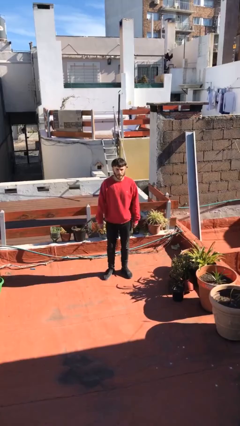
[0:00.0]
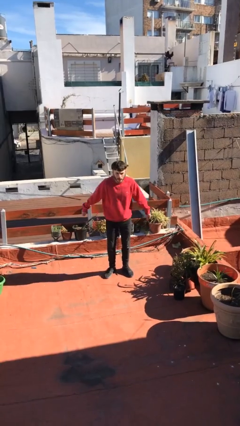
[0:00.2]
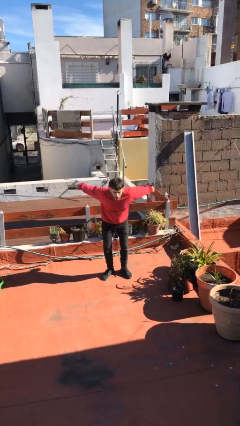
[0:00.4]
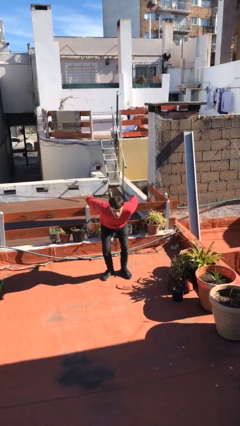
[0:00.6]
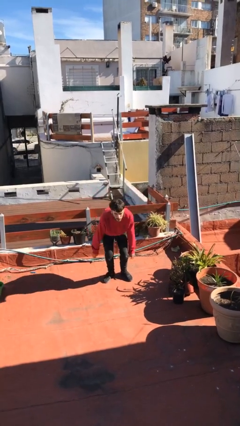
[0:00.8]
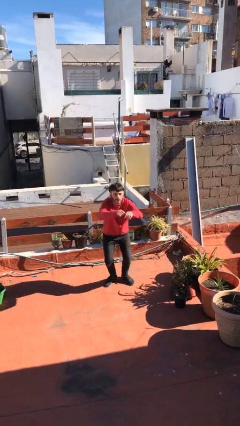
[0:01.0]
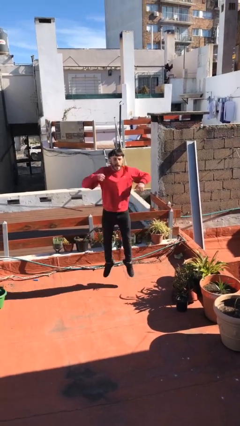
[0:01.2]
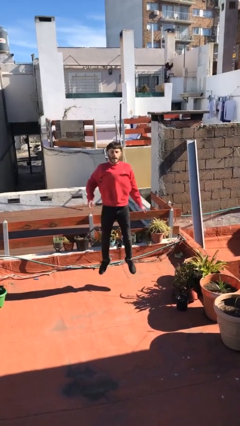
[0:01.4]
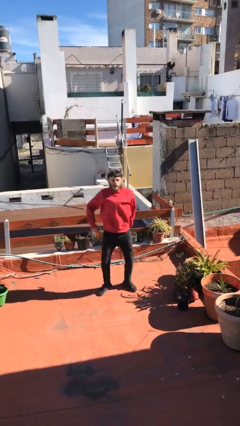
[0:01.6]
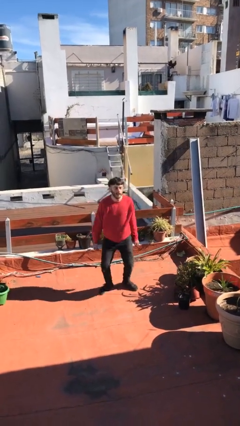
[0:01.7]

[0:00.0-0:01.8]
person jumps

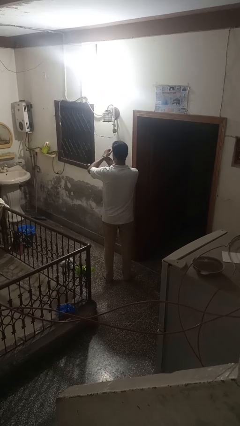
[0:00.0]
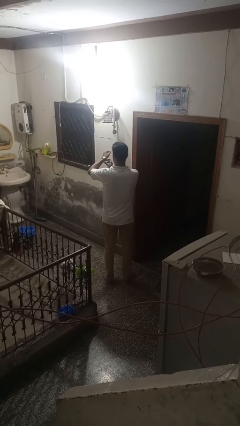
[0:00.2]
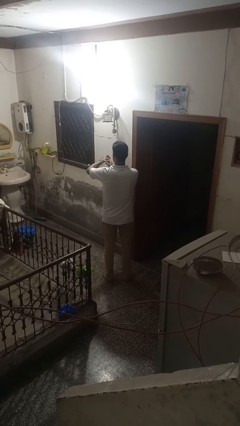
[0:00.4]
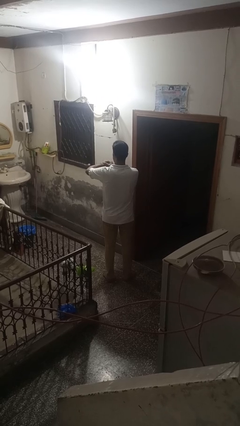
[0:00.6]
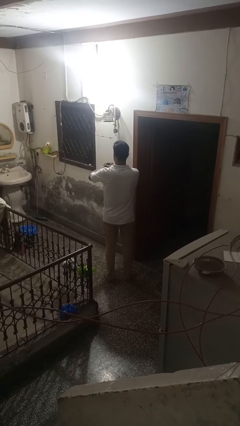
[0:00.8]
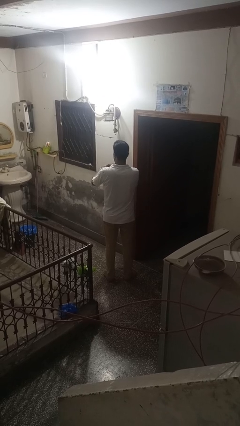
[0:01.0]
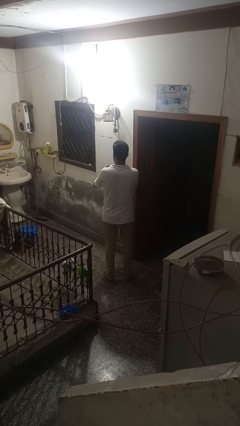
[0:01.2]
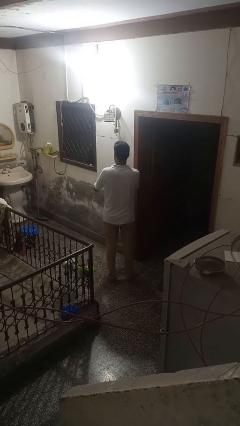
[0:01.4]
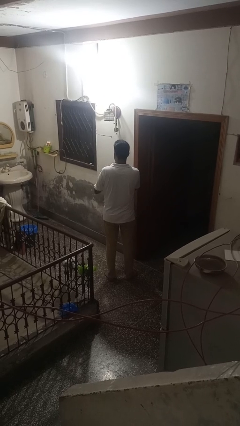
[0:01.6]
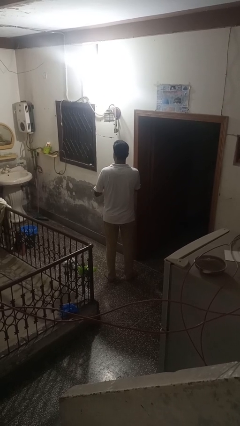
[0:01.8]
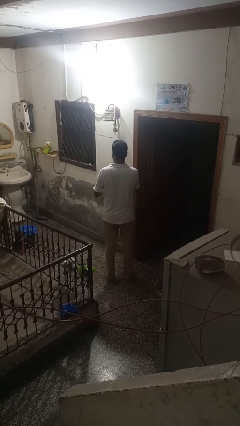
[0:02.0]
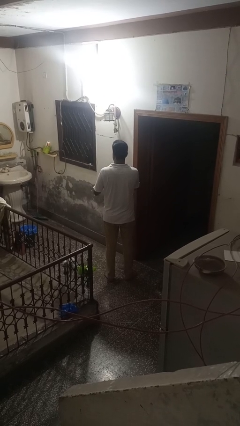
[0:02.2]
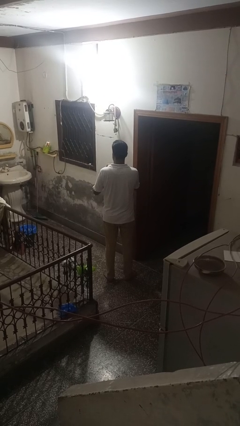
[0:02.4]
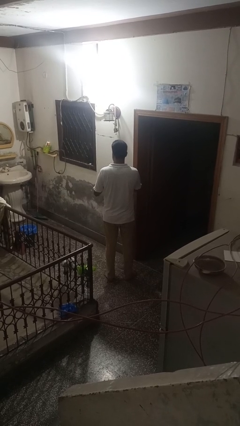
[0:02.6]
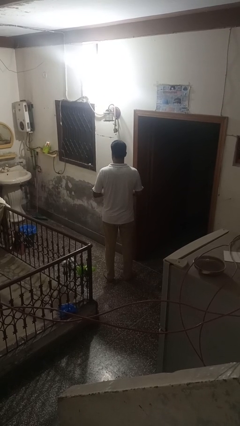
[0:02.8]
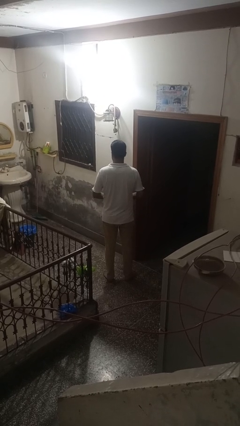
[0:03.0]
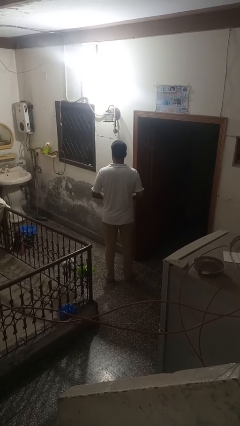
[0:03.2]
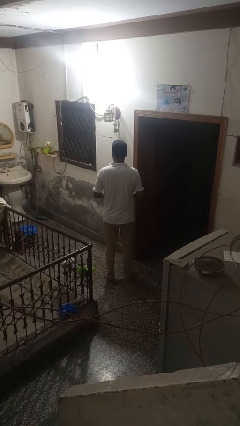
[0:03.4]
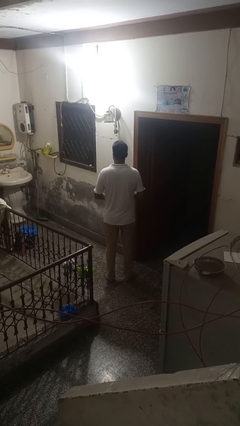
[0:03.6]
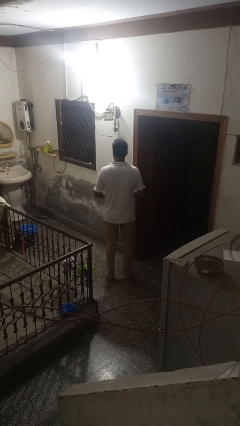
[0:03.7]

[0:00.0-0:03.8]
person takes off wristwatch

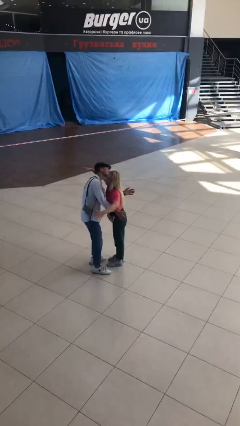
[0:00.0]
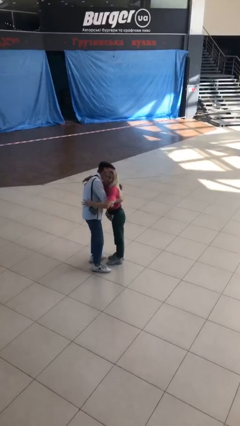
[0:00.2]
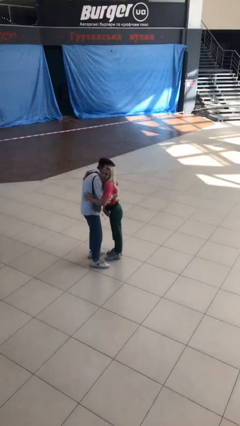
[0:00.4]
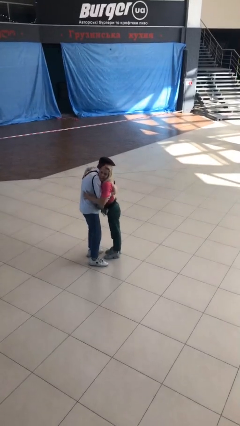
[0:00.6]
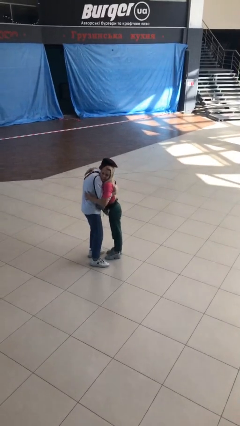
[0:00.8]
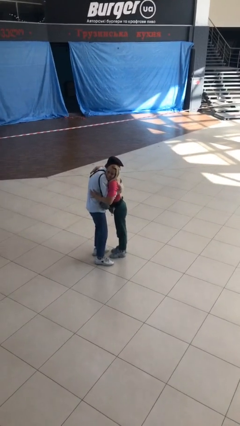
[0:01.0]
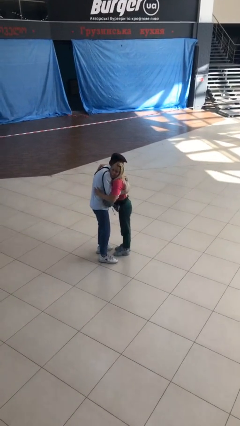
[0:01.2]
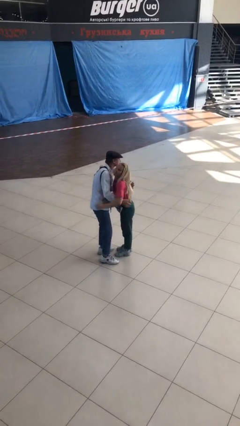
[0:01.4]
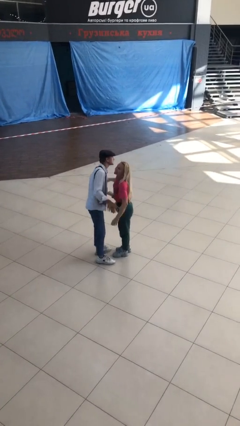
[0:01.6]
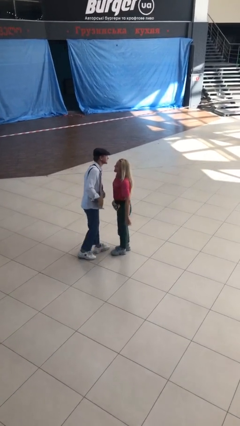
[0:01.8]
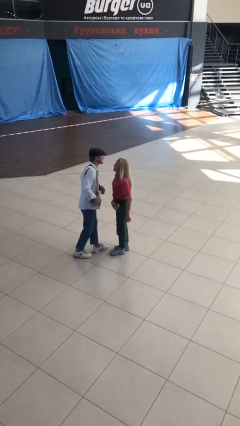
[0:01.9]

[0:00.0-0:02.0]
person embraces person

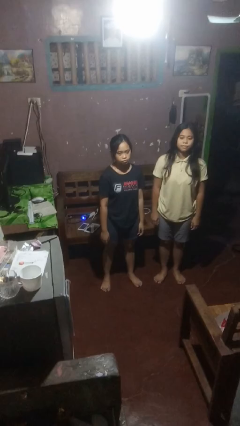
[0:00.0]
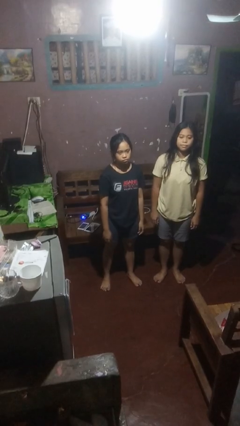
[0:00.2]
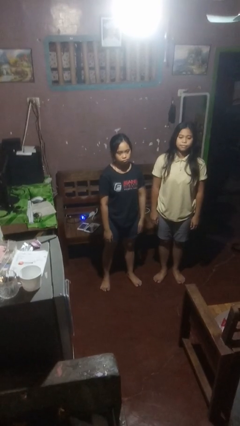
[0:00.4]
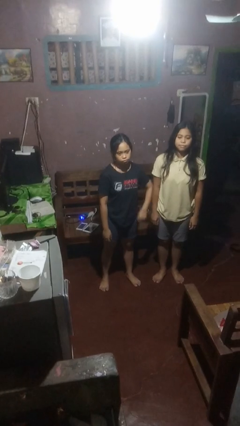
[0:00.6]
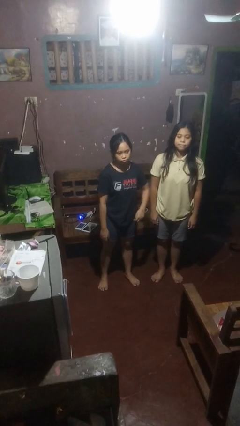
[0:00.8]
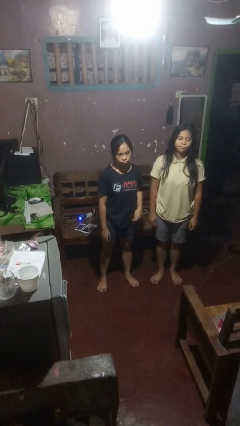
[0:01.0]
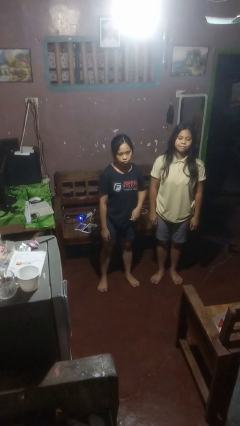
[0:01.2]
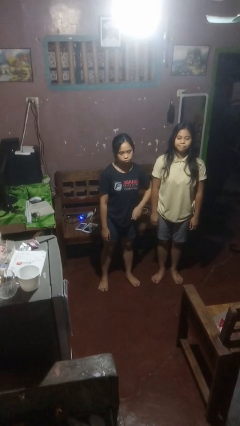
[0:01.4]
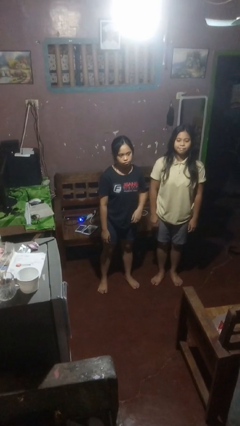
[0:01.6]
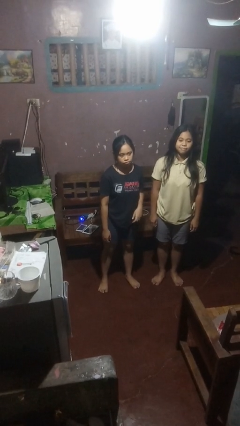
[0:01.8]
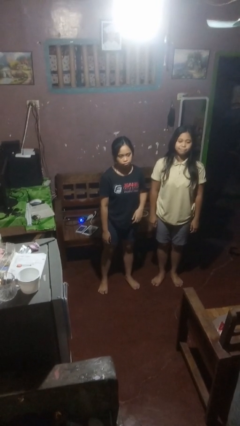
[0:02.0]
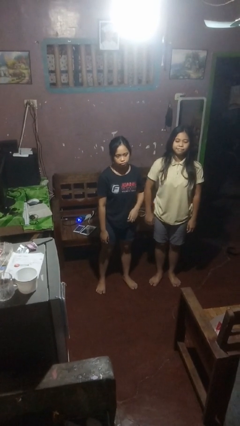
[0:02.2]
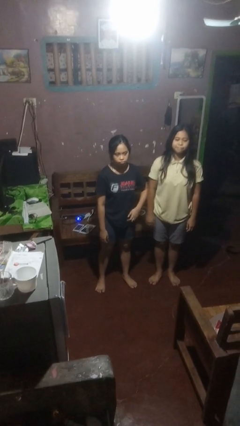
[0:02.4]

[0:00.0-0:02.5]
person nudges person with elbow

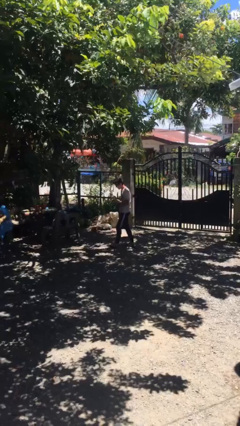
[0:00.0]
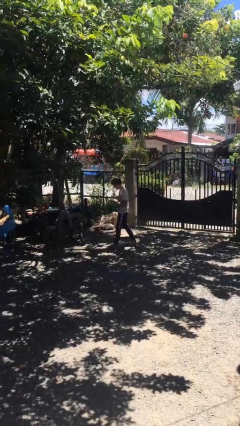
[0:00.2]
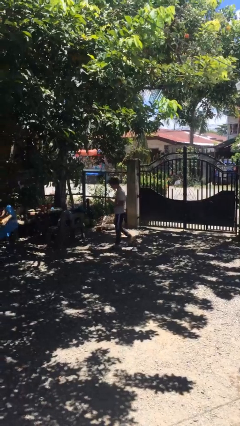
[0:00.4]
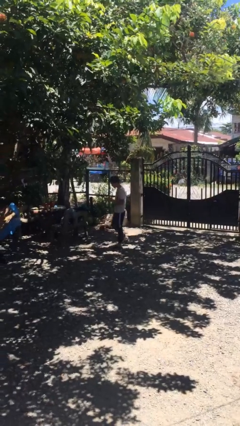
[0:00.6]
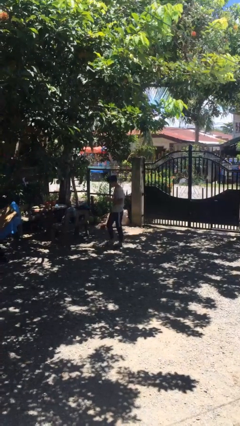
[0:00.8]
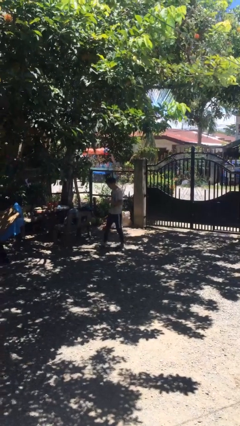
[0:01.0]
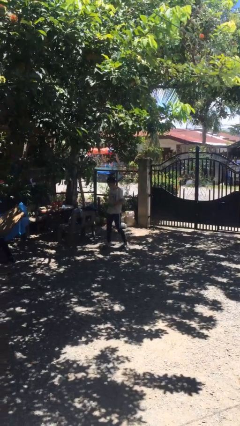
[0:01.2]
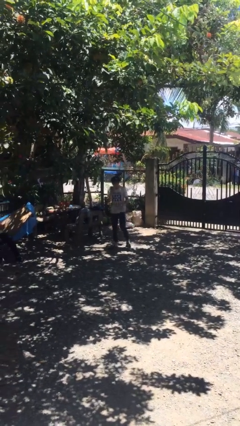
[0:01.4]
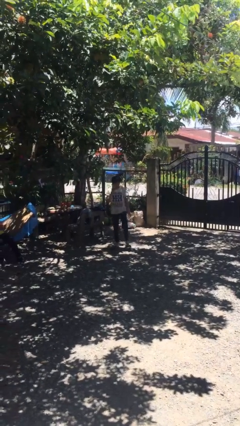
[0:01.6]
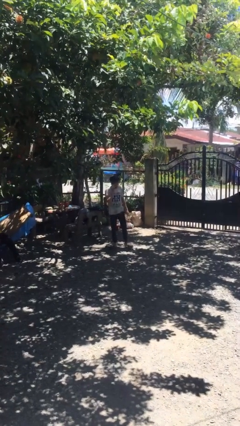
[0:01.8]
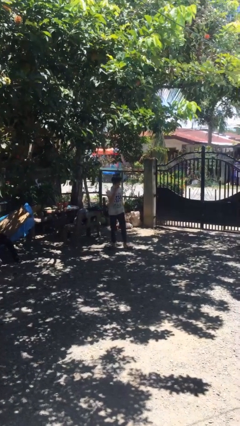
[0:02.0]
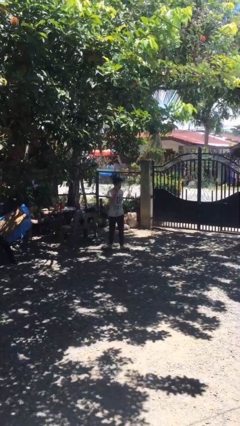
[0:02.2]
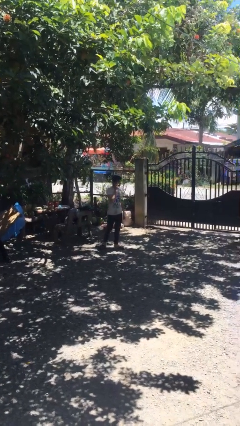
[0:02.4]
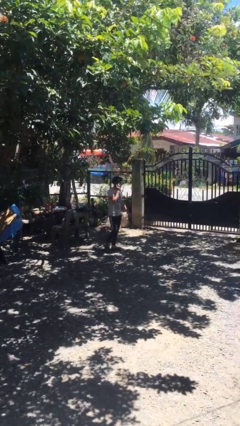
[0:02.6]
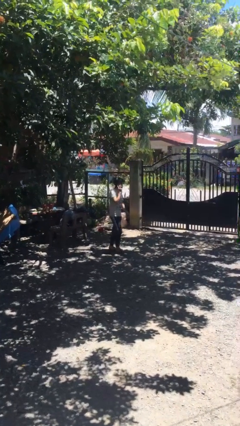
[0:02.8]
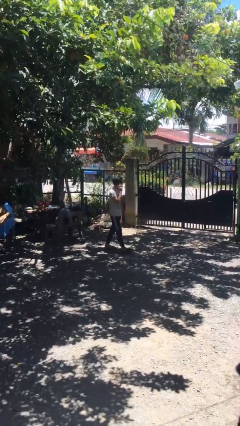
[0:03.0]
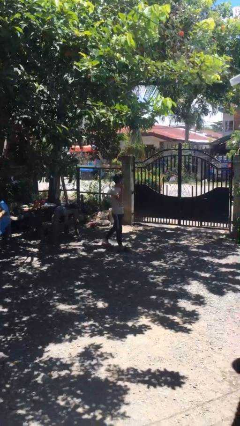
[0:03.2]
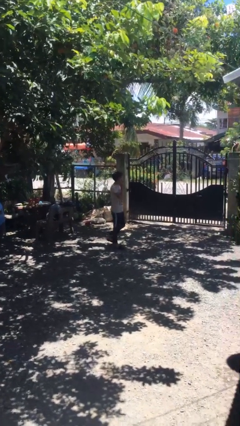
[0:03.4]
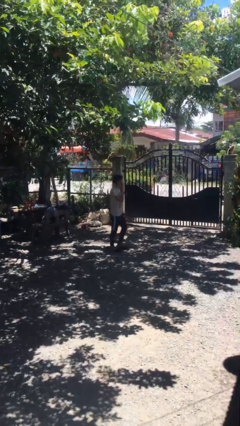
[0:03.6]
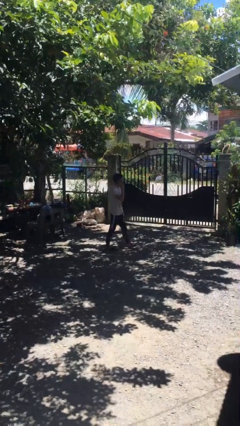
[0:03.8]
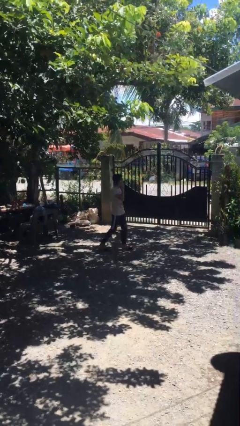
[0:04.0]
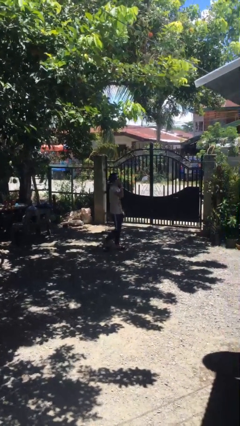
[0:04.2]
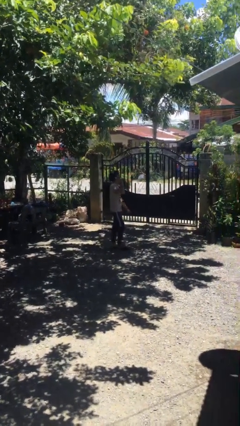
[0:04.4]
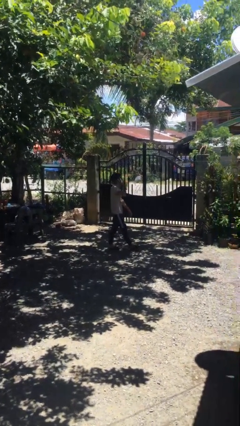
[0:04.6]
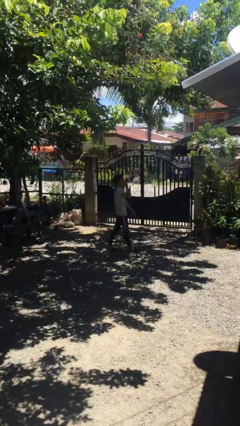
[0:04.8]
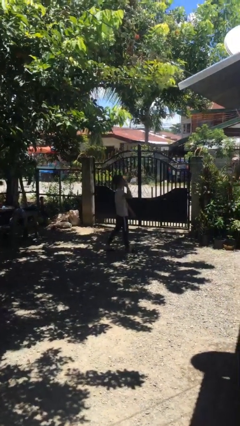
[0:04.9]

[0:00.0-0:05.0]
person talks on phone

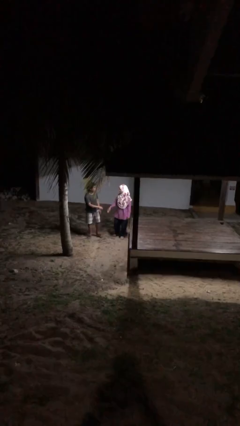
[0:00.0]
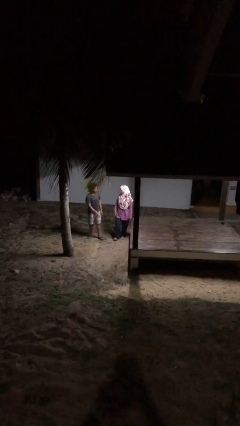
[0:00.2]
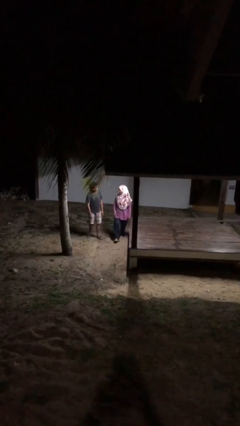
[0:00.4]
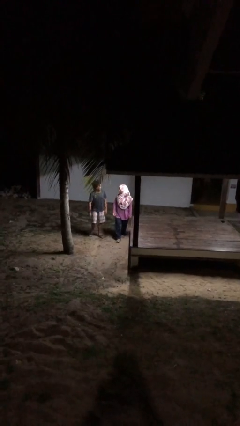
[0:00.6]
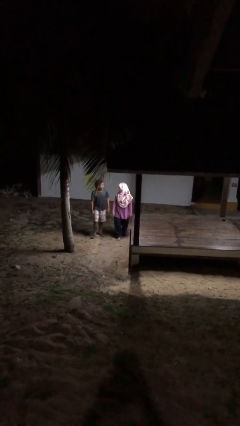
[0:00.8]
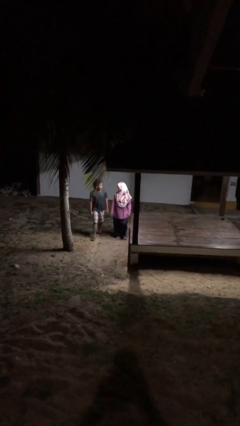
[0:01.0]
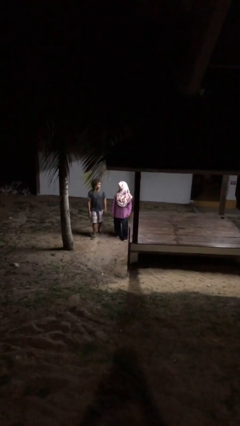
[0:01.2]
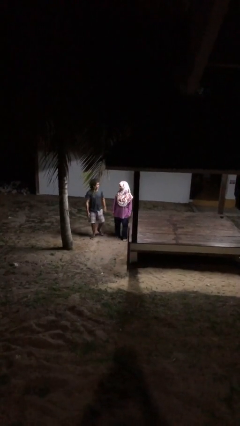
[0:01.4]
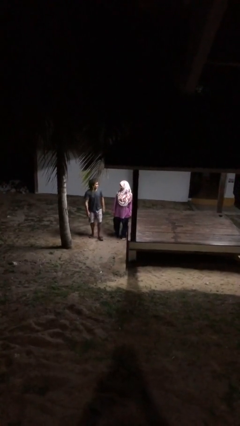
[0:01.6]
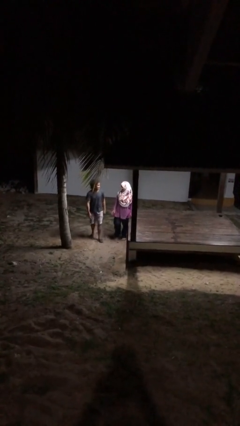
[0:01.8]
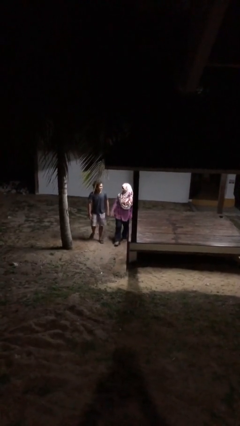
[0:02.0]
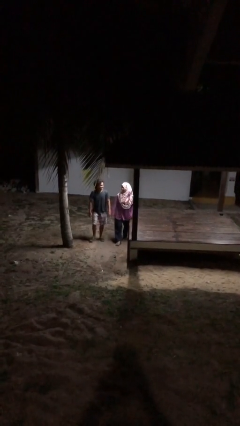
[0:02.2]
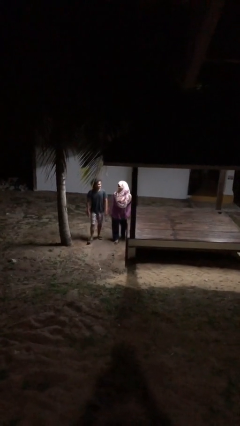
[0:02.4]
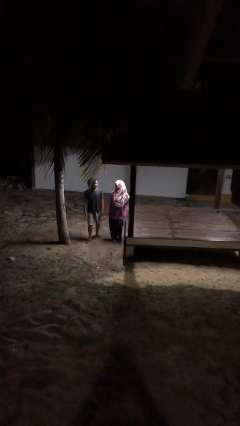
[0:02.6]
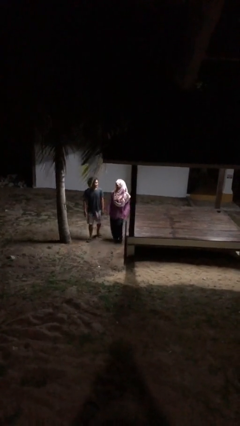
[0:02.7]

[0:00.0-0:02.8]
person talks to person
